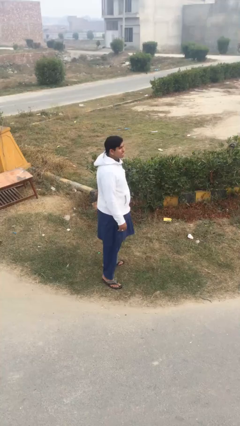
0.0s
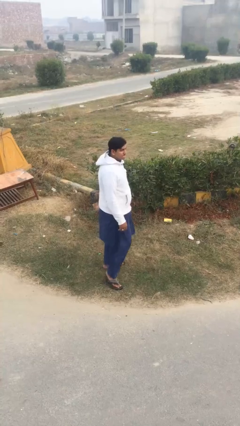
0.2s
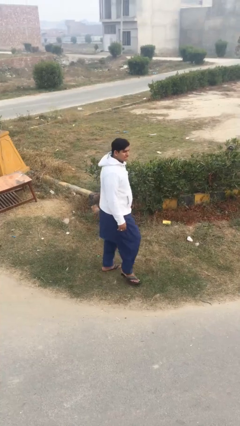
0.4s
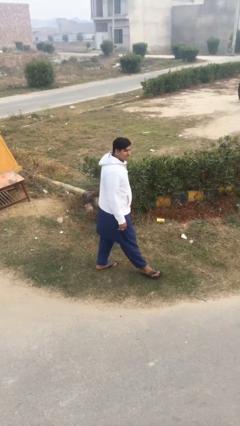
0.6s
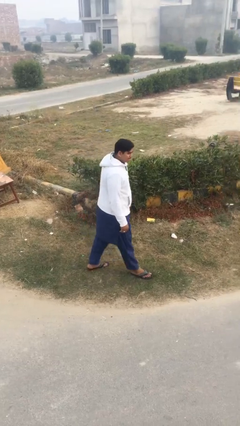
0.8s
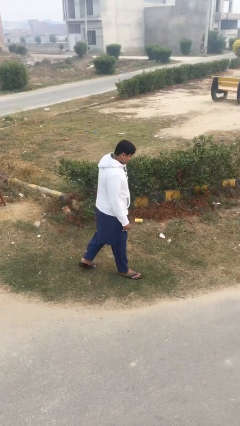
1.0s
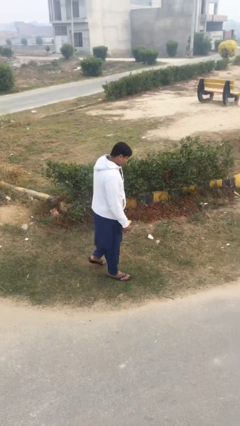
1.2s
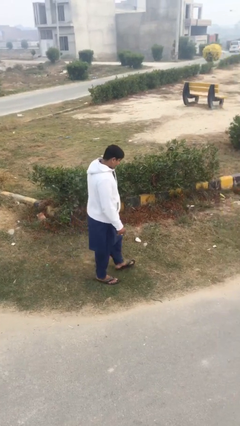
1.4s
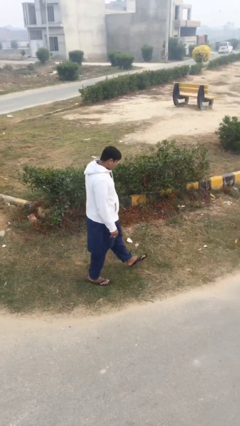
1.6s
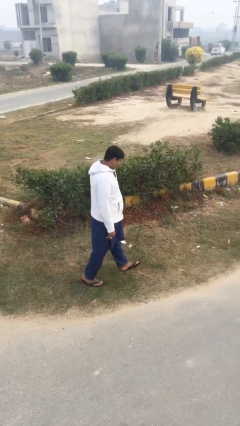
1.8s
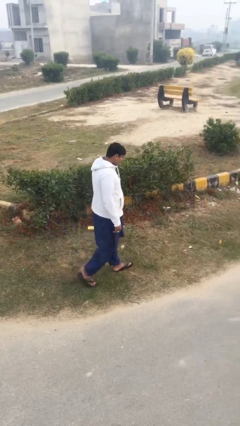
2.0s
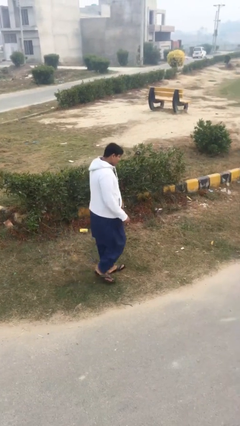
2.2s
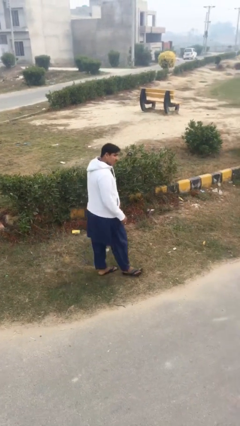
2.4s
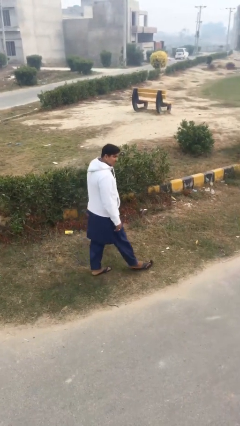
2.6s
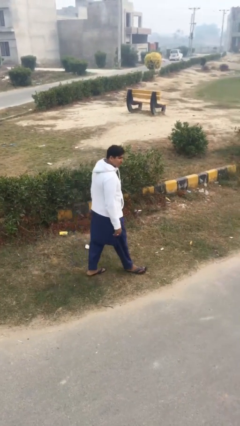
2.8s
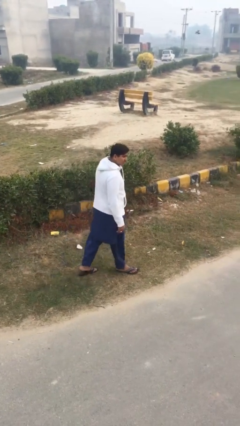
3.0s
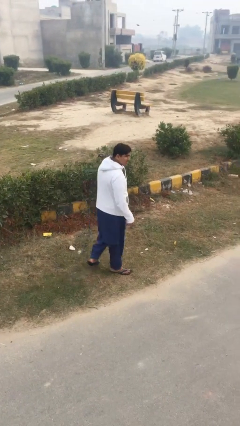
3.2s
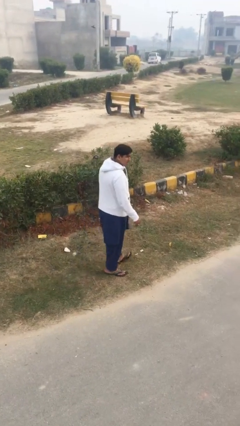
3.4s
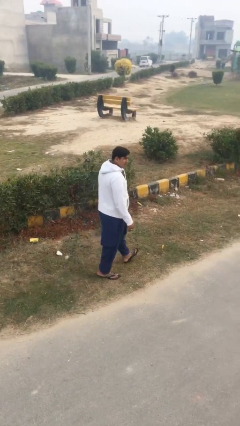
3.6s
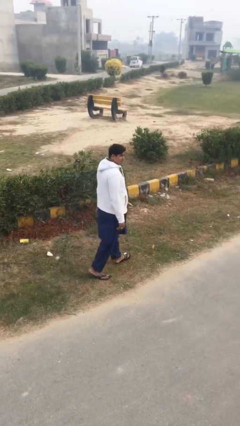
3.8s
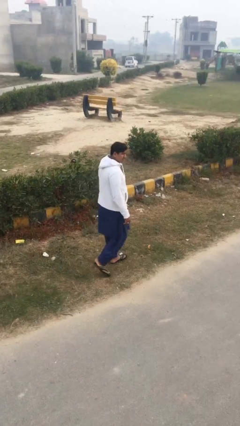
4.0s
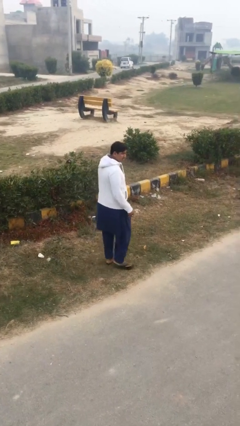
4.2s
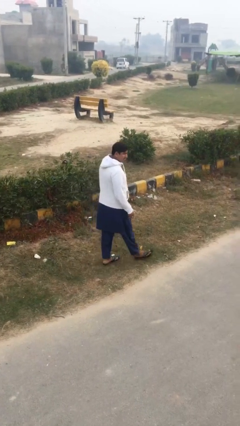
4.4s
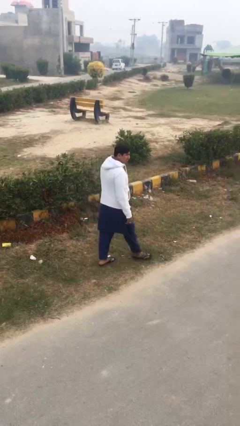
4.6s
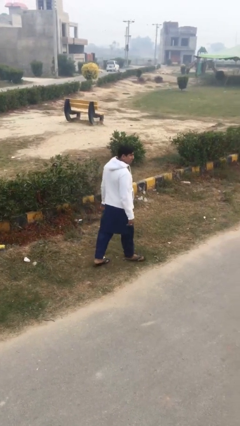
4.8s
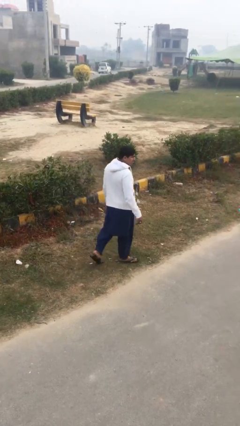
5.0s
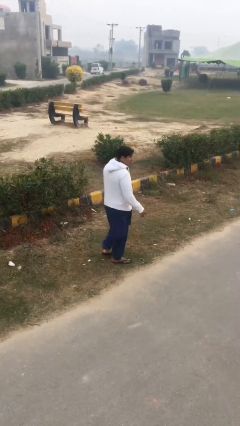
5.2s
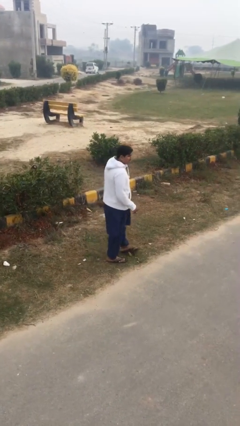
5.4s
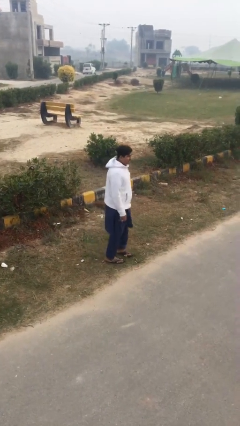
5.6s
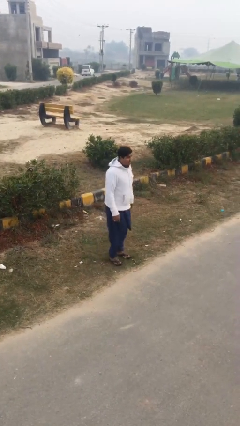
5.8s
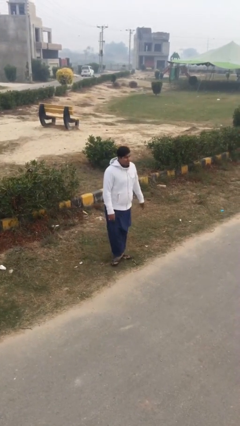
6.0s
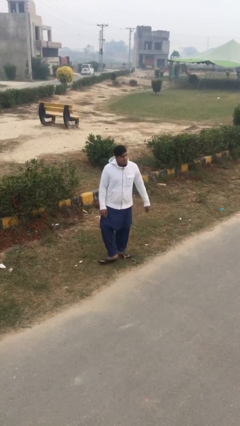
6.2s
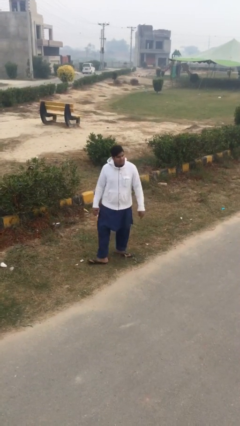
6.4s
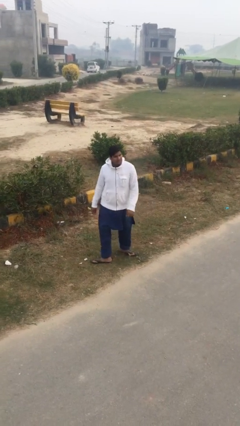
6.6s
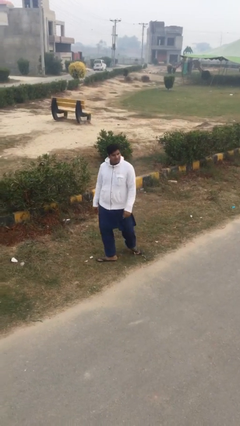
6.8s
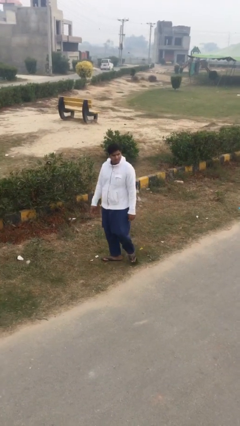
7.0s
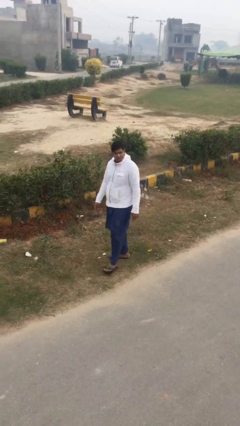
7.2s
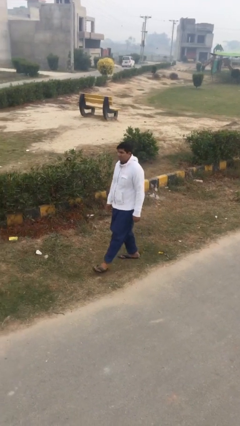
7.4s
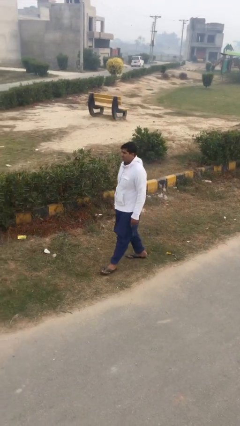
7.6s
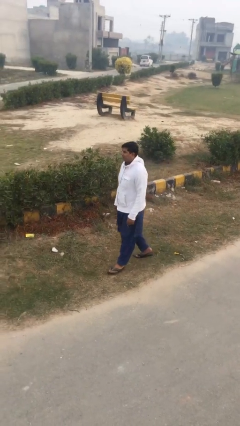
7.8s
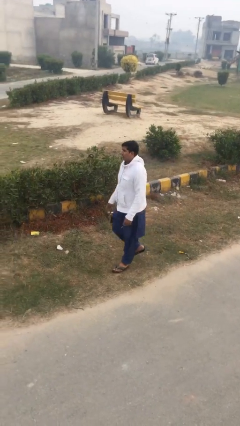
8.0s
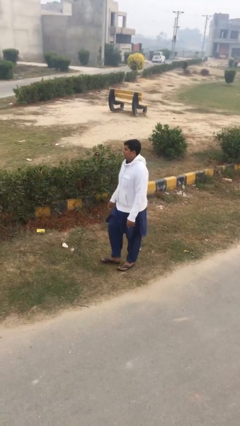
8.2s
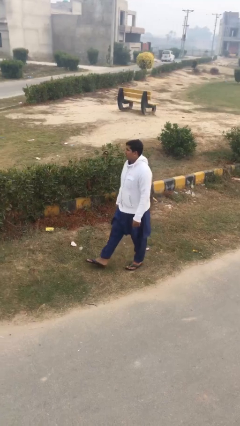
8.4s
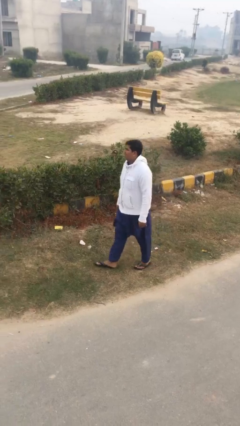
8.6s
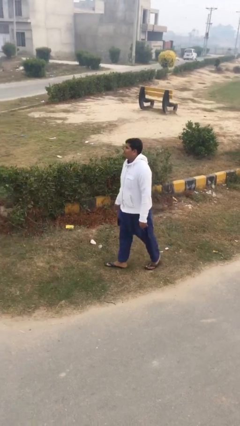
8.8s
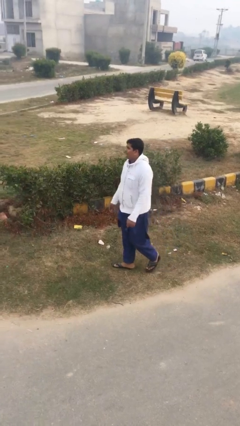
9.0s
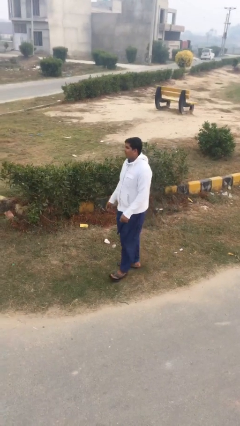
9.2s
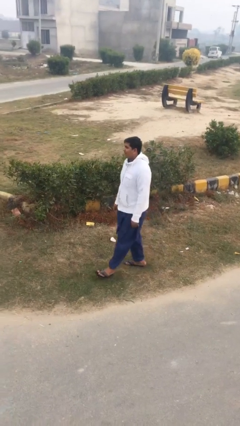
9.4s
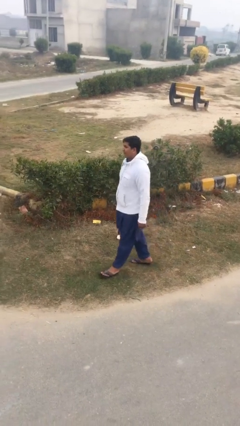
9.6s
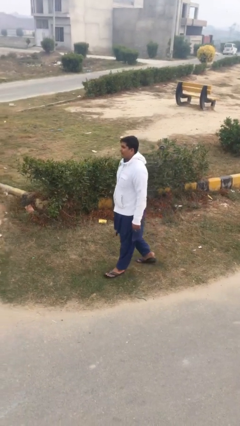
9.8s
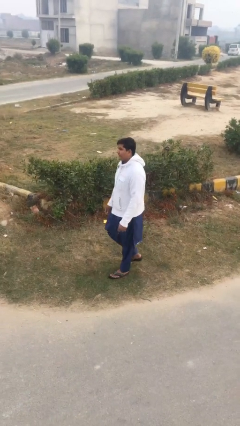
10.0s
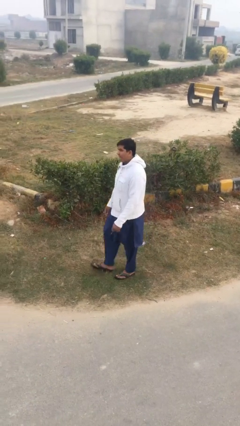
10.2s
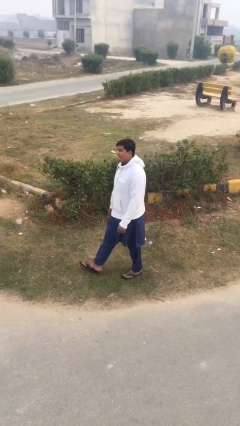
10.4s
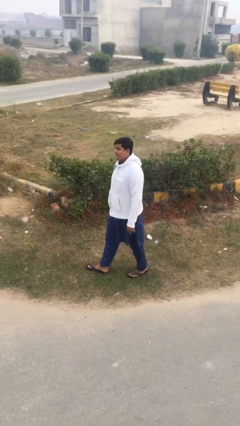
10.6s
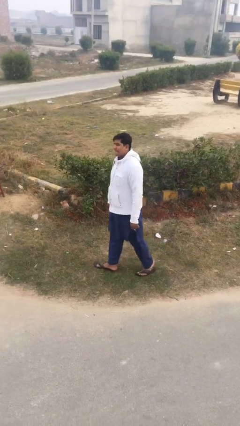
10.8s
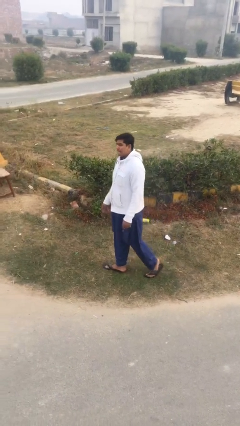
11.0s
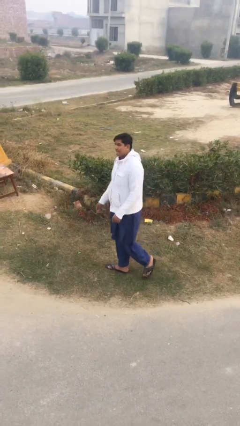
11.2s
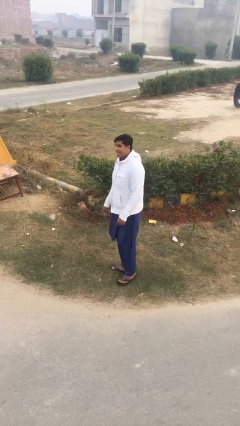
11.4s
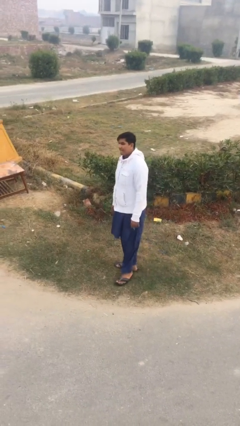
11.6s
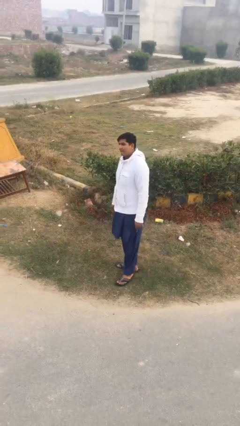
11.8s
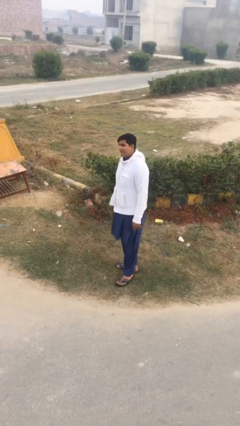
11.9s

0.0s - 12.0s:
person walks

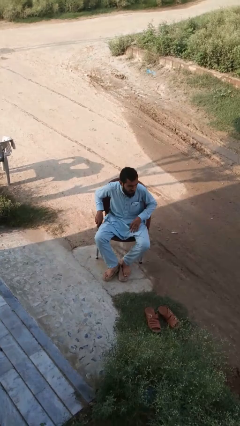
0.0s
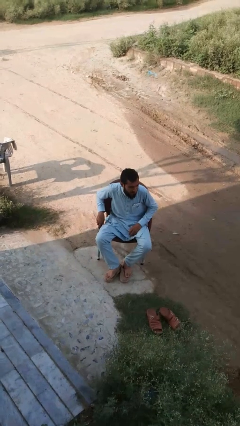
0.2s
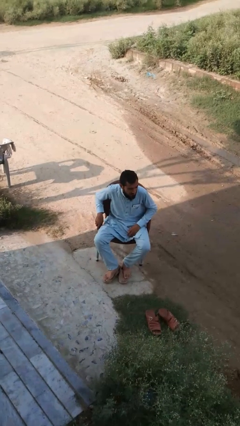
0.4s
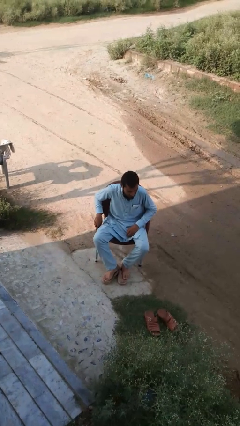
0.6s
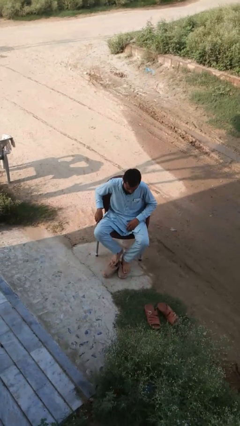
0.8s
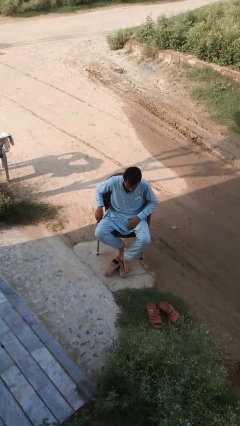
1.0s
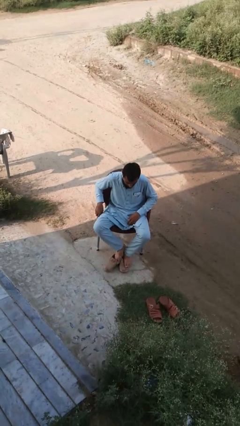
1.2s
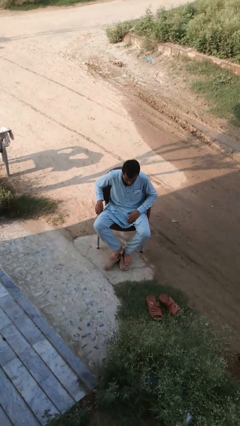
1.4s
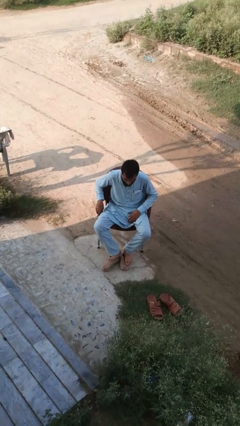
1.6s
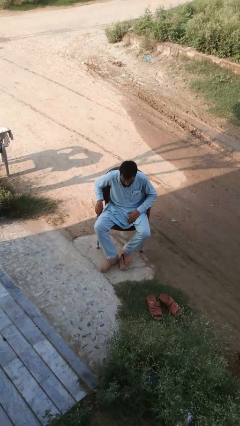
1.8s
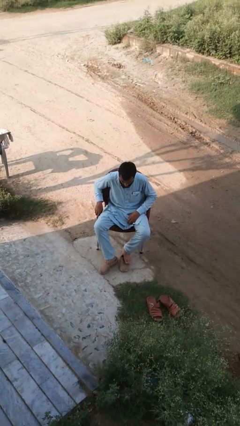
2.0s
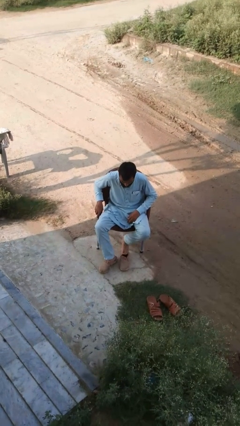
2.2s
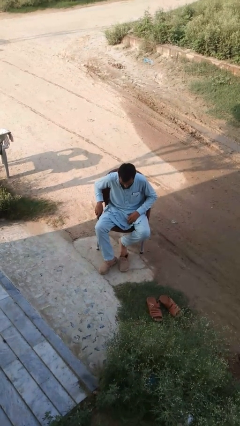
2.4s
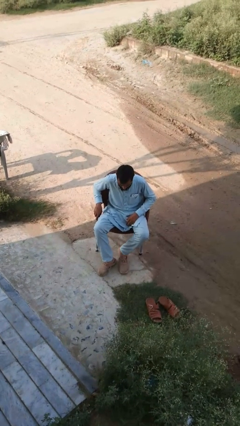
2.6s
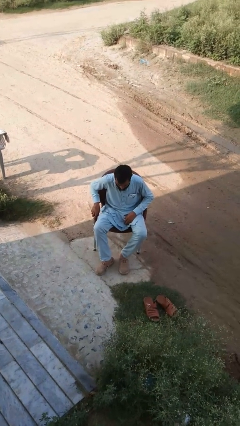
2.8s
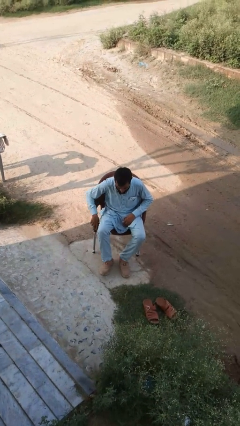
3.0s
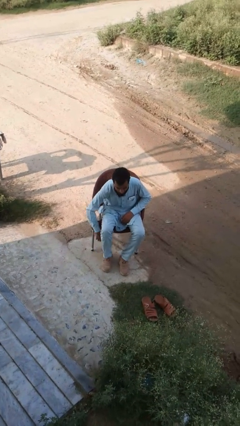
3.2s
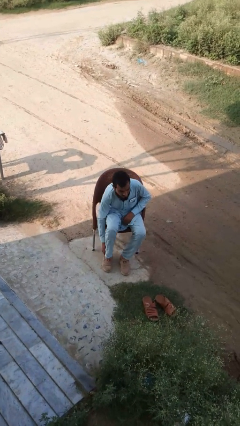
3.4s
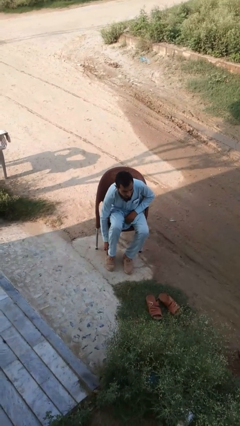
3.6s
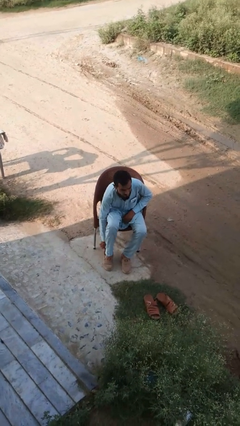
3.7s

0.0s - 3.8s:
person puts on shoes

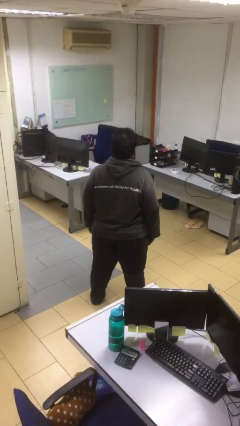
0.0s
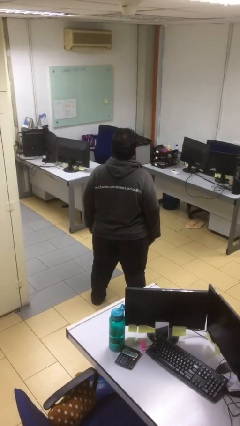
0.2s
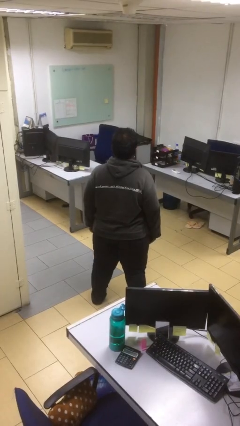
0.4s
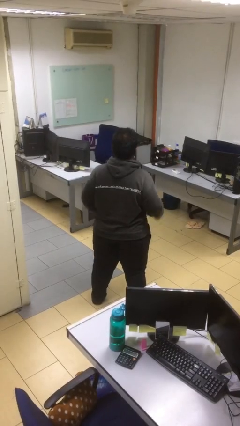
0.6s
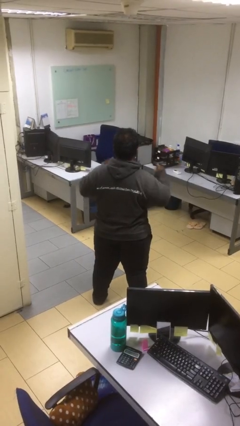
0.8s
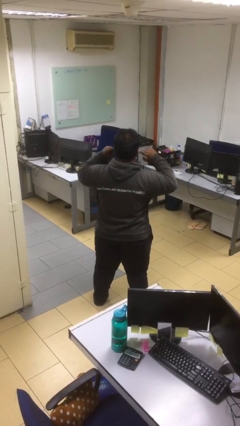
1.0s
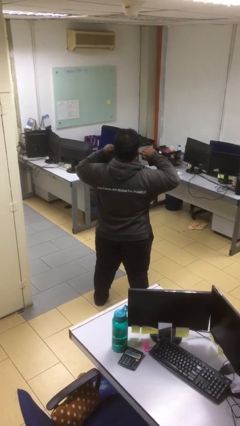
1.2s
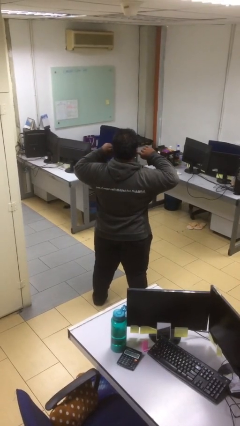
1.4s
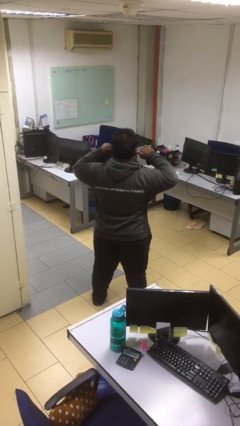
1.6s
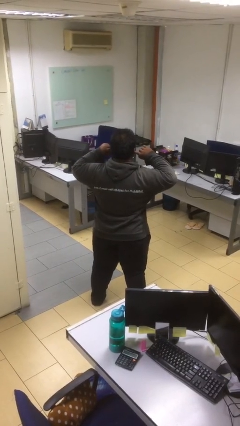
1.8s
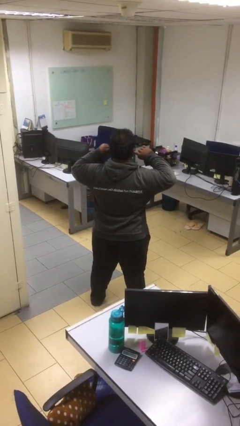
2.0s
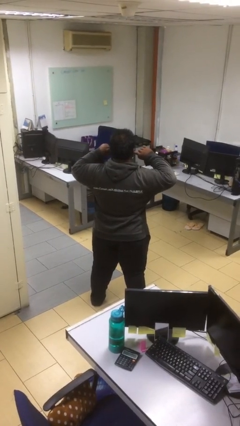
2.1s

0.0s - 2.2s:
person puts fingers in ear

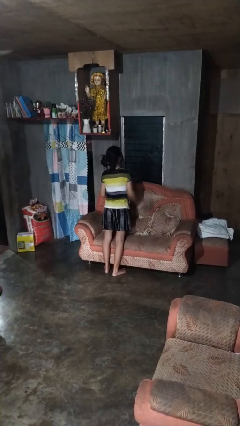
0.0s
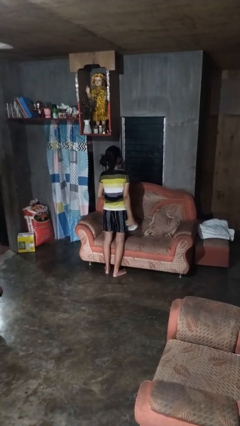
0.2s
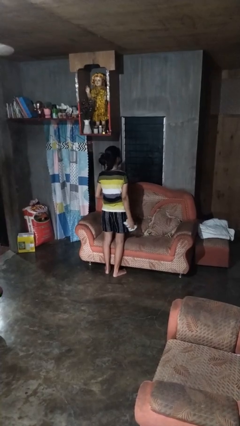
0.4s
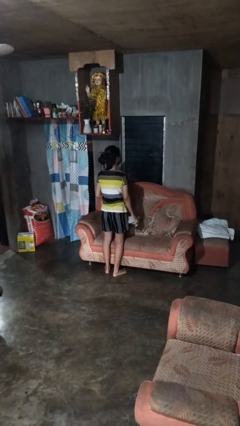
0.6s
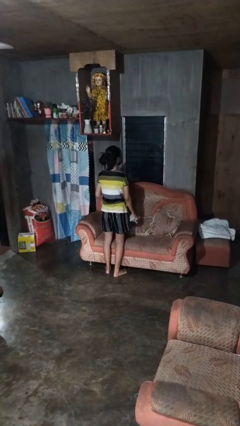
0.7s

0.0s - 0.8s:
person sprays from bottle
